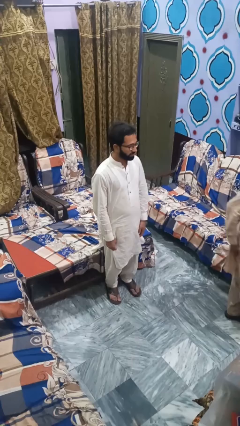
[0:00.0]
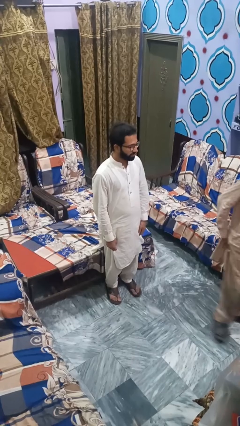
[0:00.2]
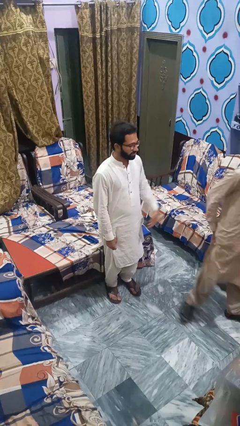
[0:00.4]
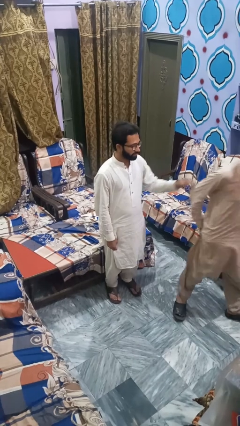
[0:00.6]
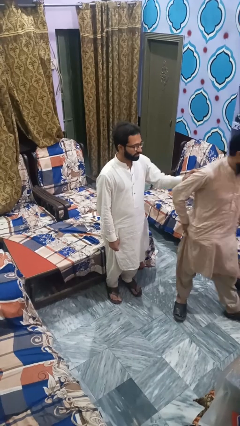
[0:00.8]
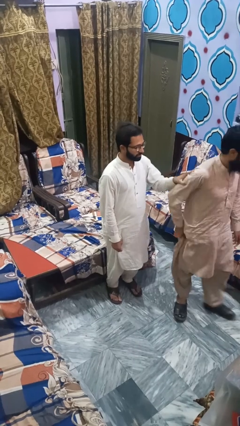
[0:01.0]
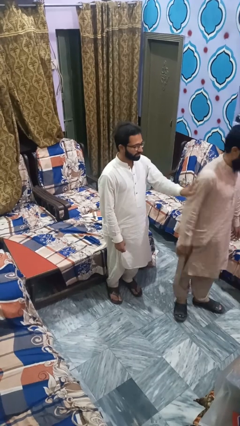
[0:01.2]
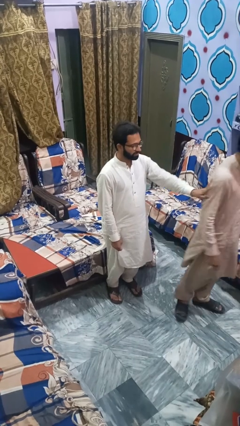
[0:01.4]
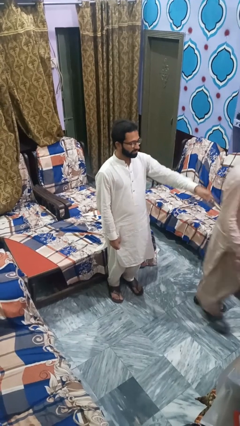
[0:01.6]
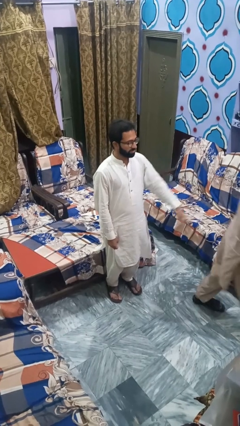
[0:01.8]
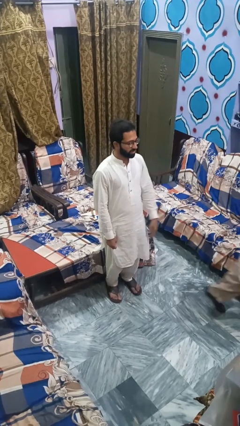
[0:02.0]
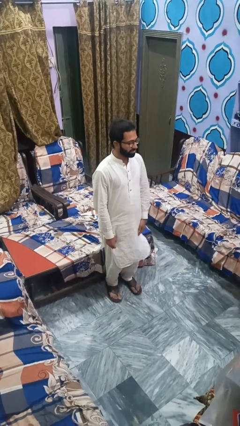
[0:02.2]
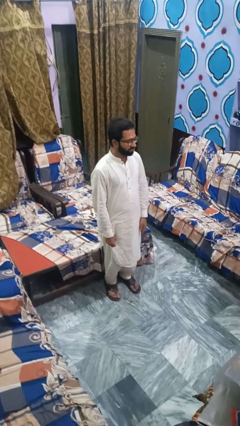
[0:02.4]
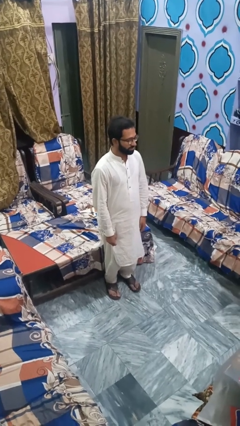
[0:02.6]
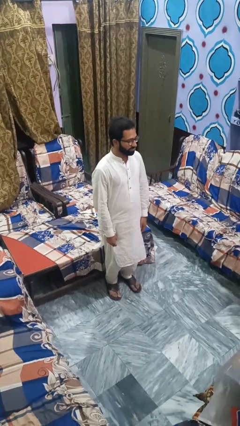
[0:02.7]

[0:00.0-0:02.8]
person shoves person

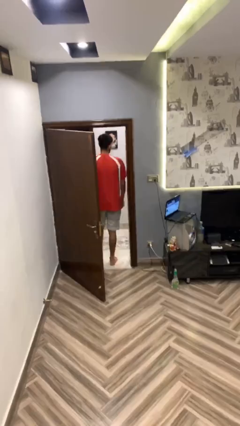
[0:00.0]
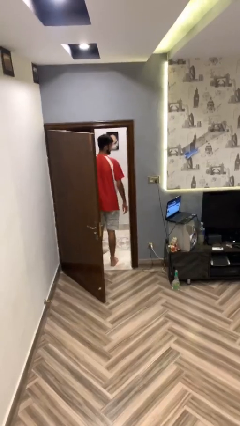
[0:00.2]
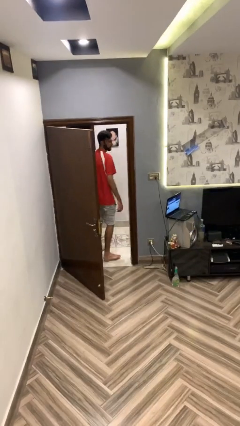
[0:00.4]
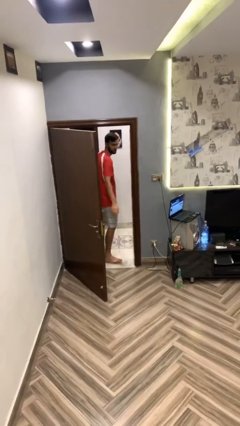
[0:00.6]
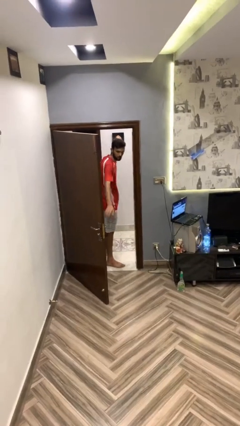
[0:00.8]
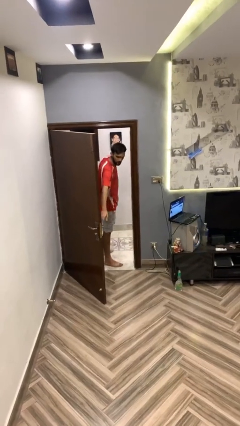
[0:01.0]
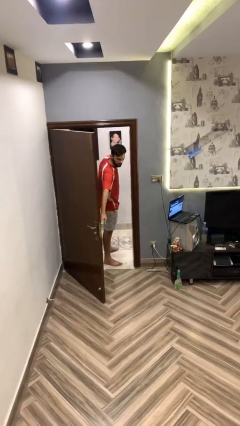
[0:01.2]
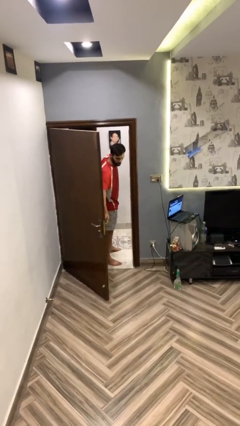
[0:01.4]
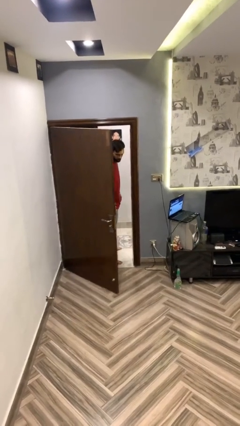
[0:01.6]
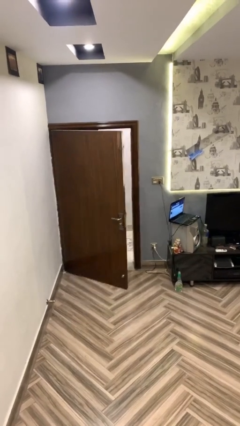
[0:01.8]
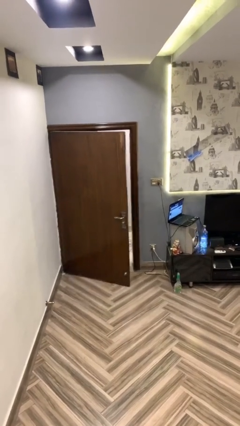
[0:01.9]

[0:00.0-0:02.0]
person closes facility door

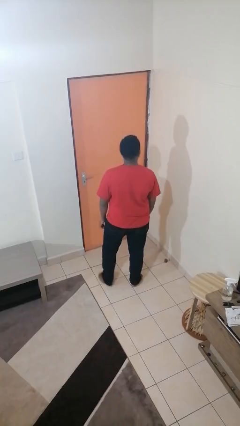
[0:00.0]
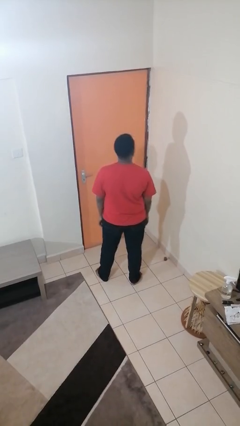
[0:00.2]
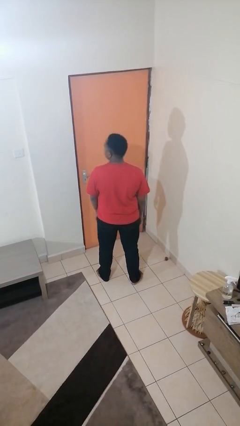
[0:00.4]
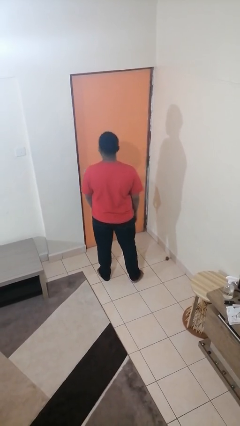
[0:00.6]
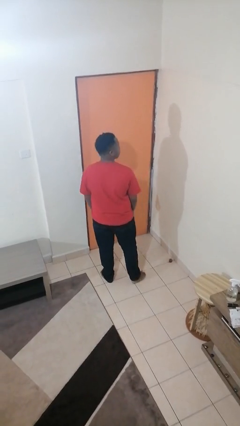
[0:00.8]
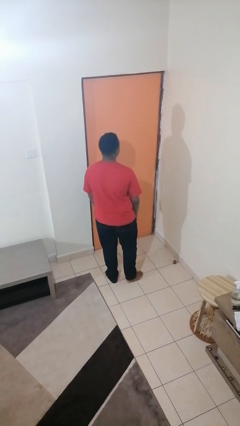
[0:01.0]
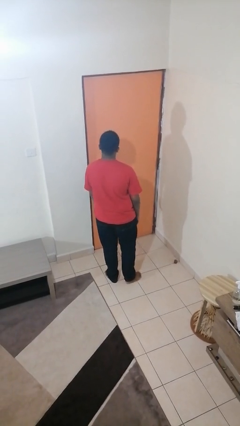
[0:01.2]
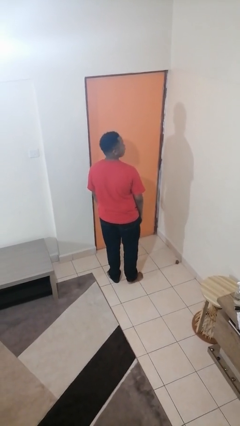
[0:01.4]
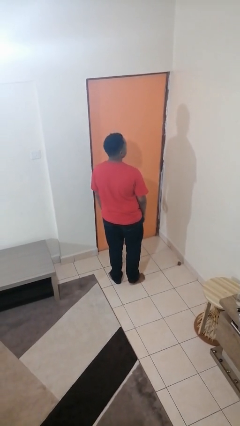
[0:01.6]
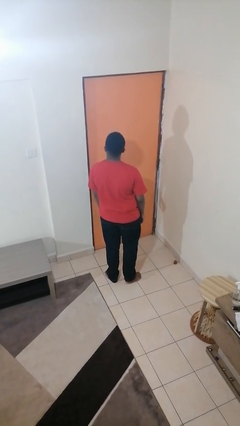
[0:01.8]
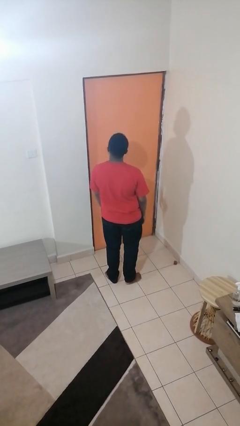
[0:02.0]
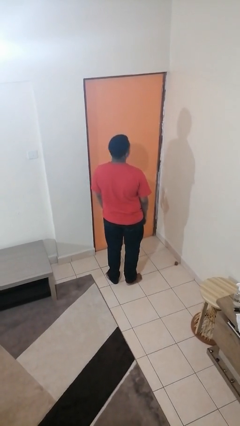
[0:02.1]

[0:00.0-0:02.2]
person shakes head

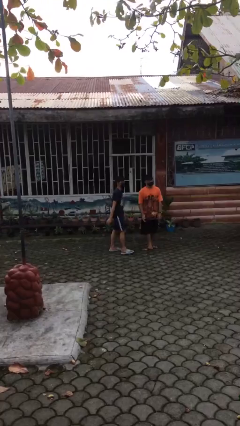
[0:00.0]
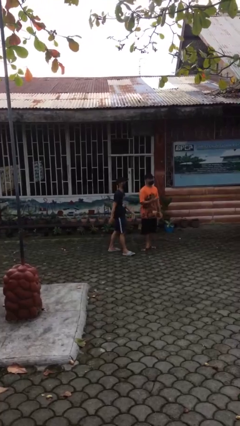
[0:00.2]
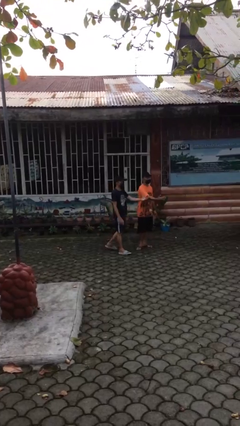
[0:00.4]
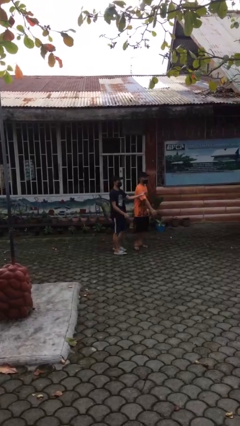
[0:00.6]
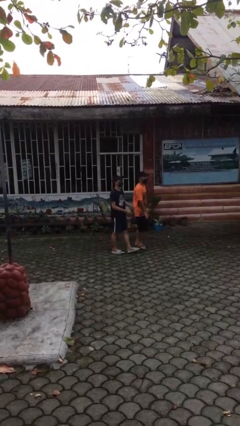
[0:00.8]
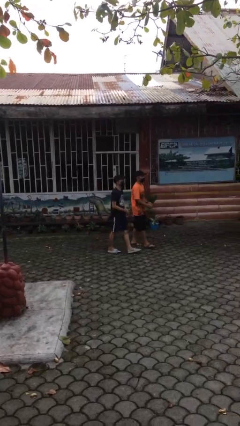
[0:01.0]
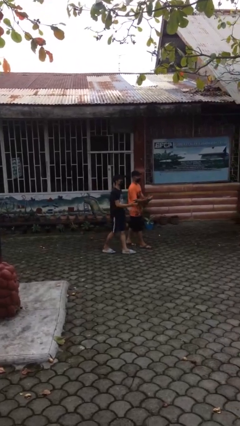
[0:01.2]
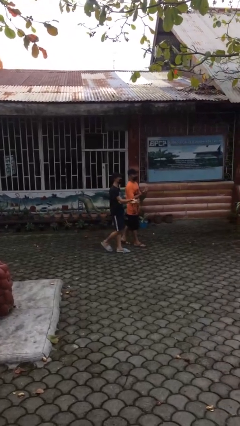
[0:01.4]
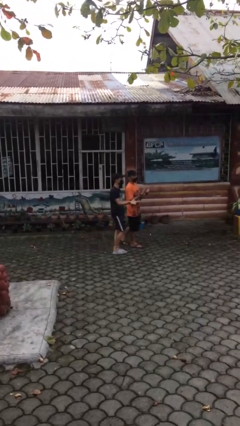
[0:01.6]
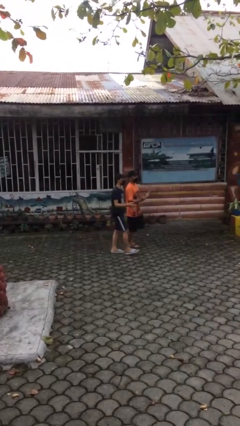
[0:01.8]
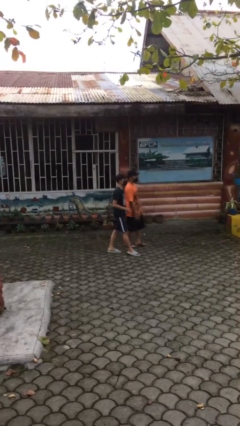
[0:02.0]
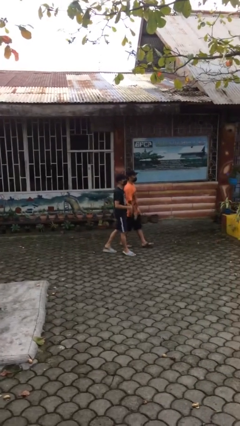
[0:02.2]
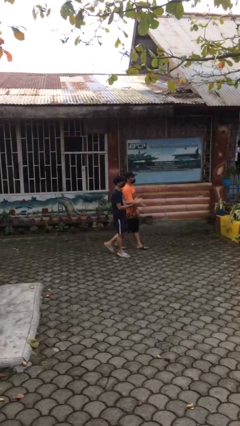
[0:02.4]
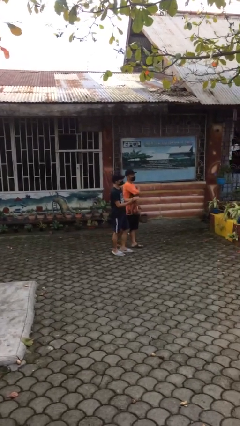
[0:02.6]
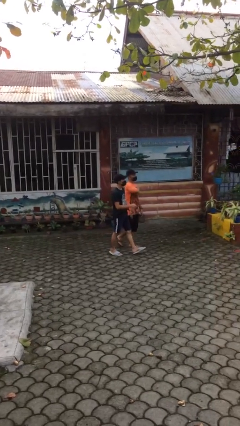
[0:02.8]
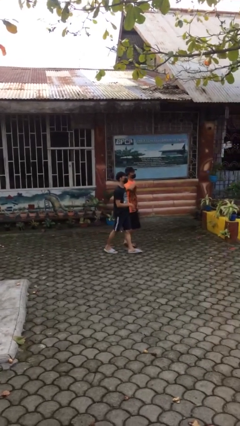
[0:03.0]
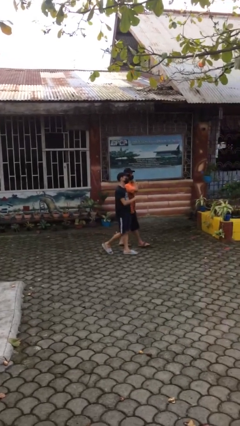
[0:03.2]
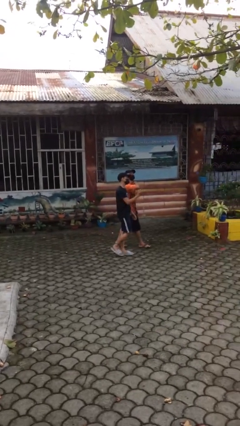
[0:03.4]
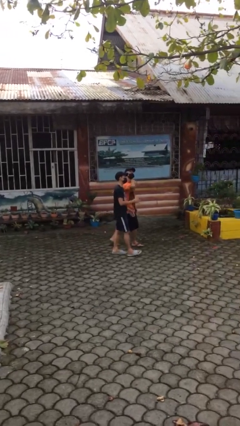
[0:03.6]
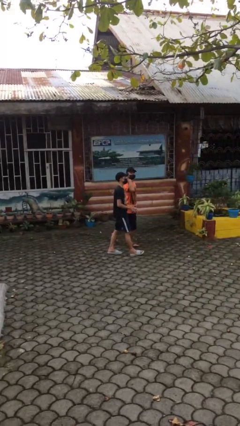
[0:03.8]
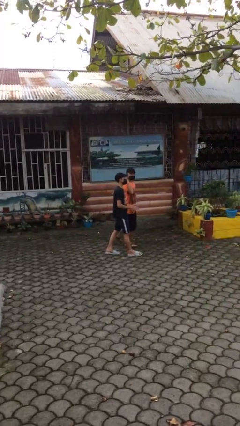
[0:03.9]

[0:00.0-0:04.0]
person talks to person

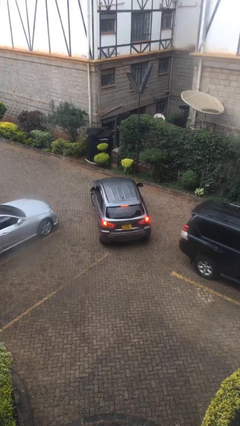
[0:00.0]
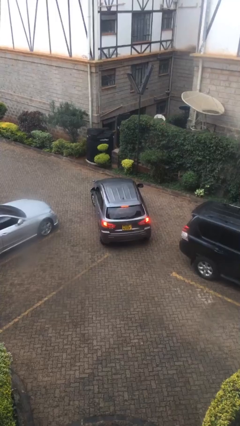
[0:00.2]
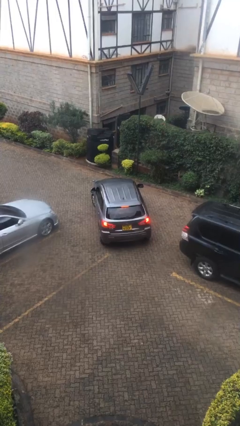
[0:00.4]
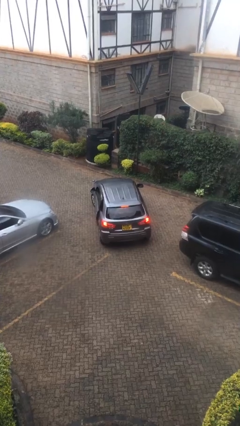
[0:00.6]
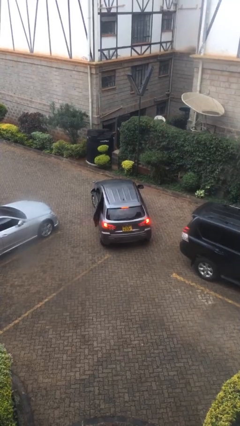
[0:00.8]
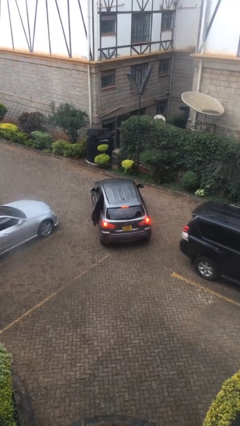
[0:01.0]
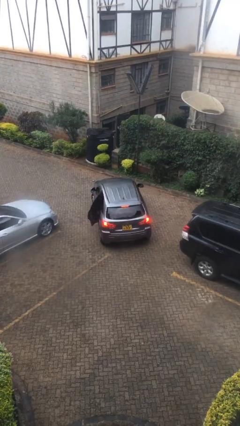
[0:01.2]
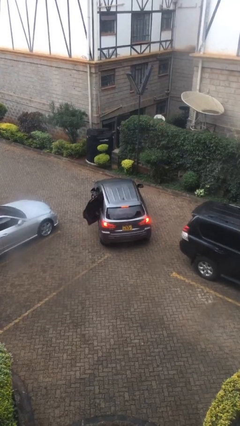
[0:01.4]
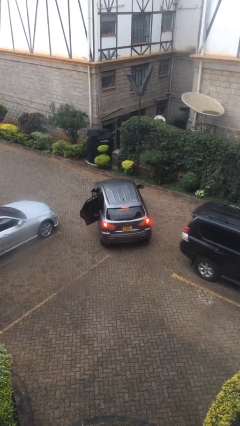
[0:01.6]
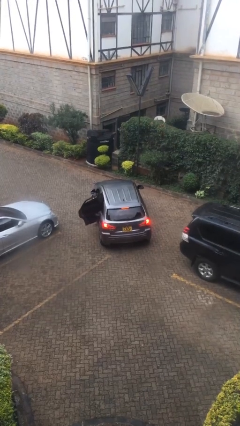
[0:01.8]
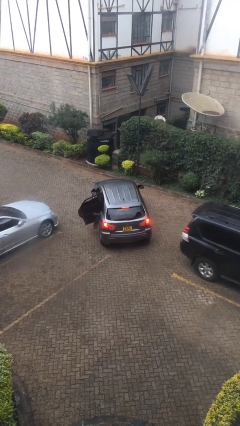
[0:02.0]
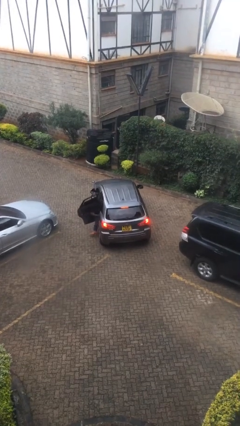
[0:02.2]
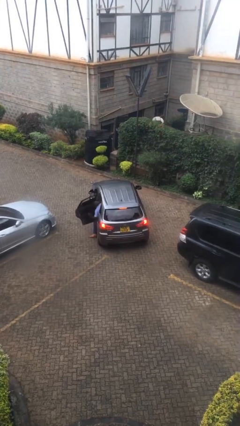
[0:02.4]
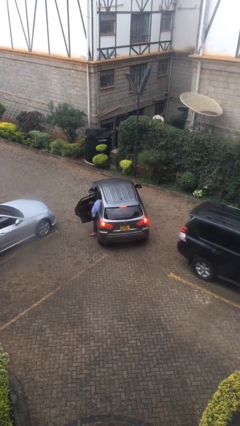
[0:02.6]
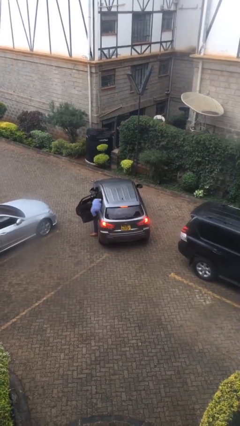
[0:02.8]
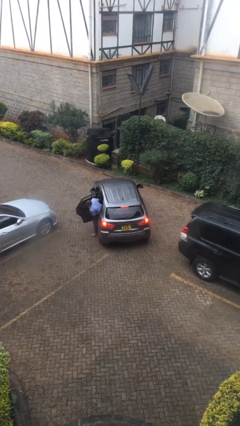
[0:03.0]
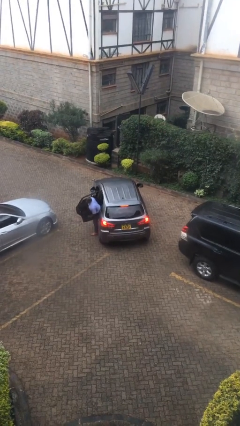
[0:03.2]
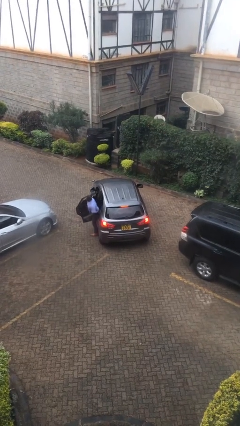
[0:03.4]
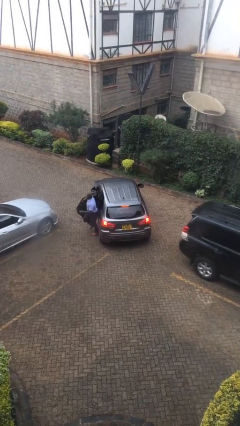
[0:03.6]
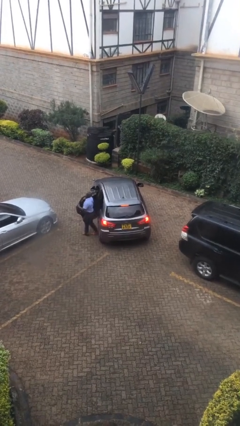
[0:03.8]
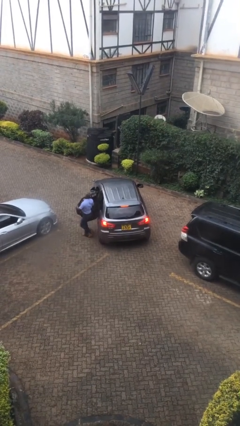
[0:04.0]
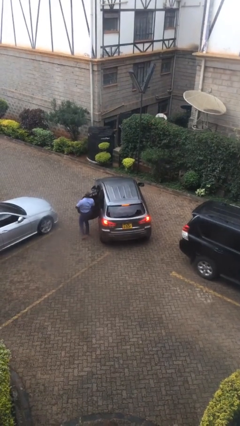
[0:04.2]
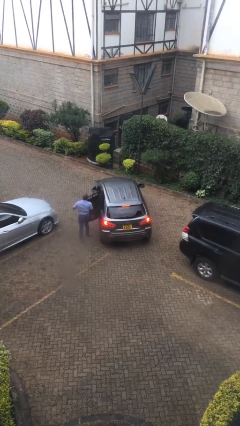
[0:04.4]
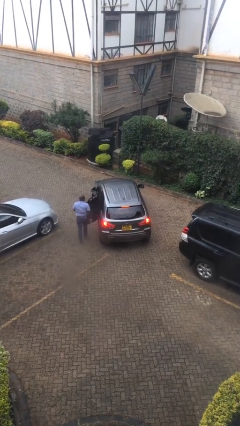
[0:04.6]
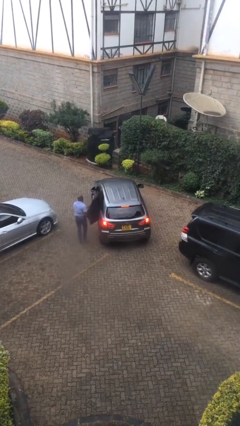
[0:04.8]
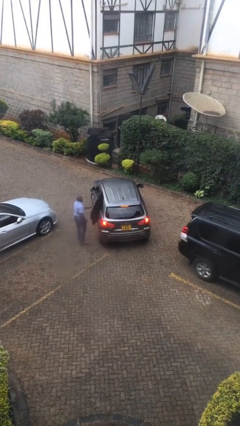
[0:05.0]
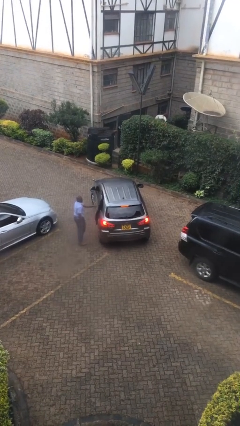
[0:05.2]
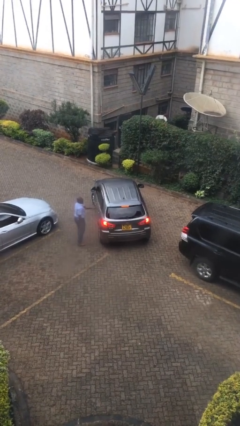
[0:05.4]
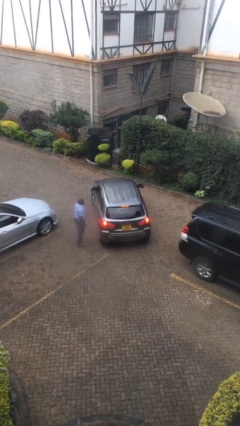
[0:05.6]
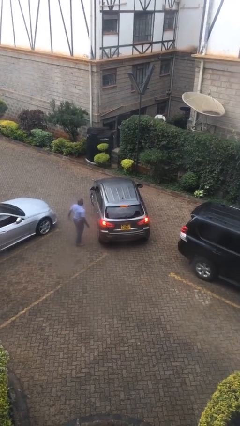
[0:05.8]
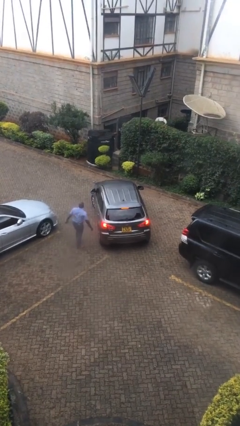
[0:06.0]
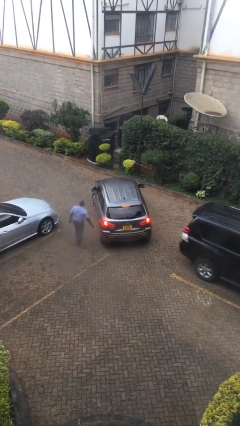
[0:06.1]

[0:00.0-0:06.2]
car drops off person

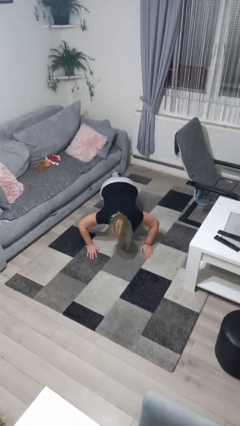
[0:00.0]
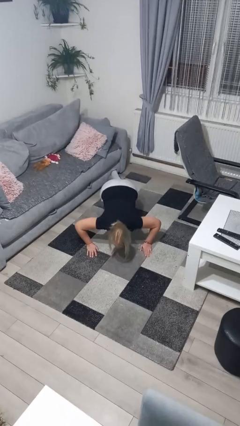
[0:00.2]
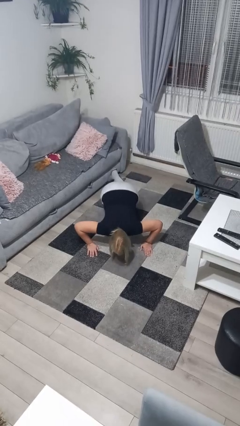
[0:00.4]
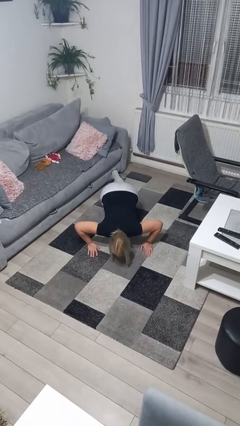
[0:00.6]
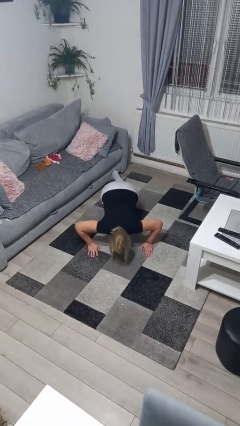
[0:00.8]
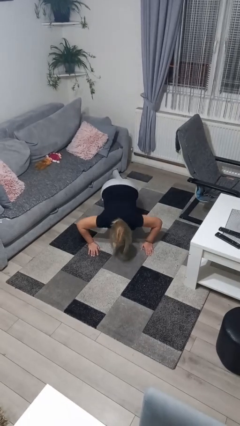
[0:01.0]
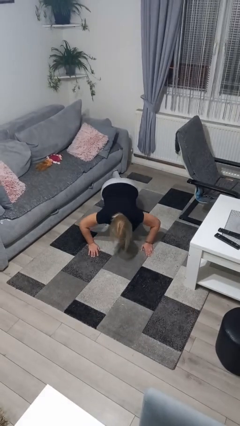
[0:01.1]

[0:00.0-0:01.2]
person exercises with pushup
